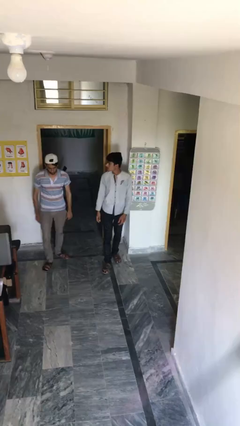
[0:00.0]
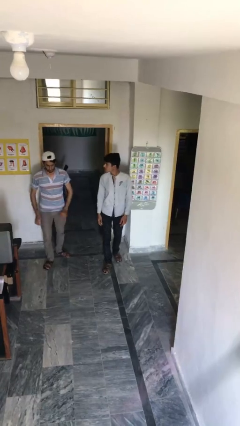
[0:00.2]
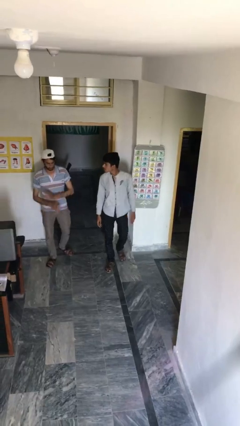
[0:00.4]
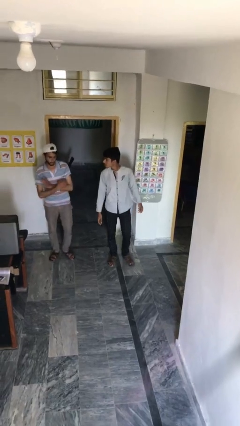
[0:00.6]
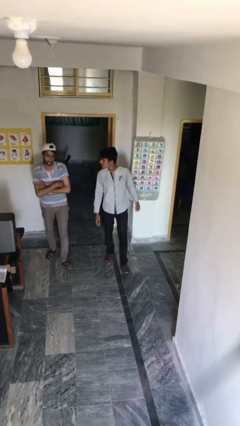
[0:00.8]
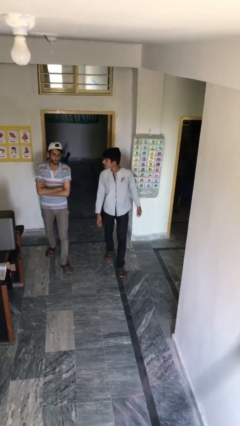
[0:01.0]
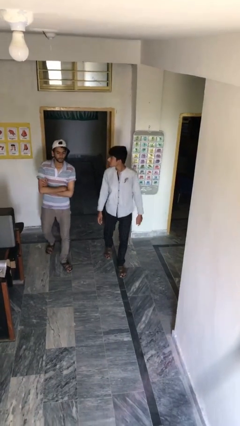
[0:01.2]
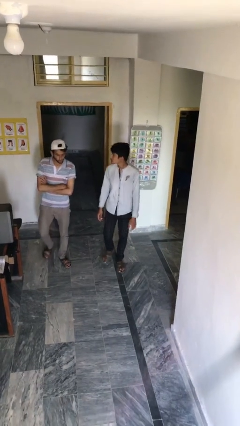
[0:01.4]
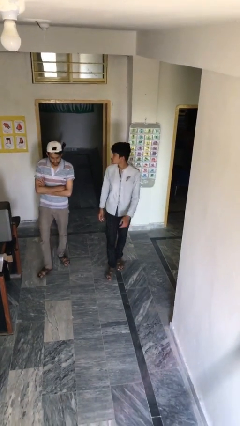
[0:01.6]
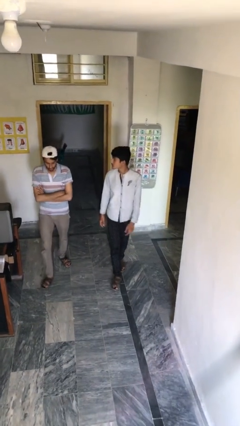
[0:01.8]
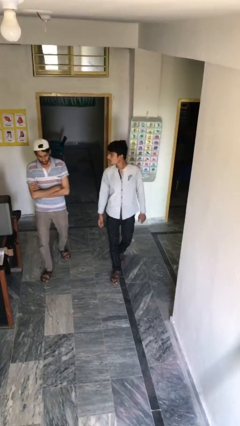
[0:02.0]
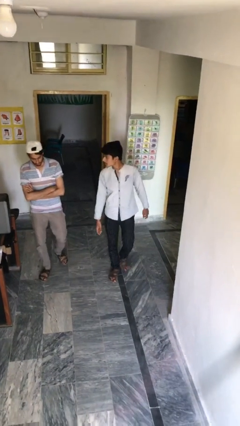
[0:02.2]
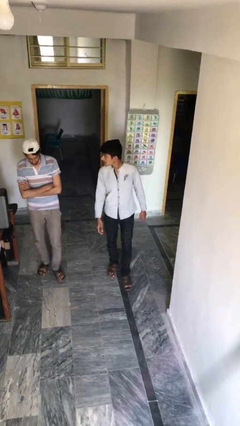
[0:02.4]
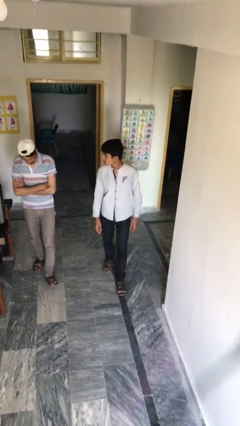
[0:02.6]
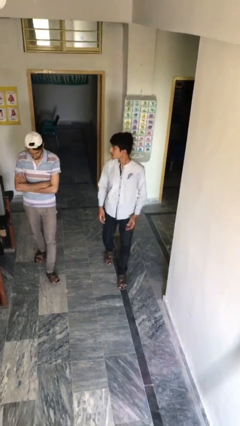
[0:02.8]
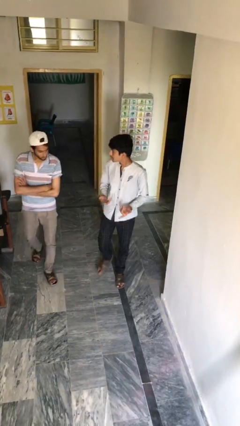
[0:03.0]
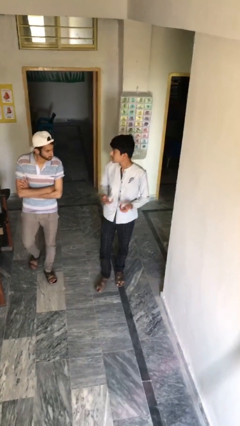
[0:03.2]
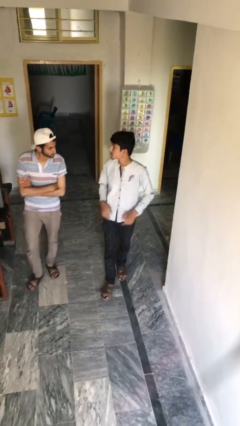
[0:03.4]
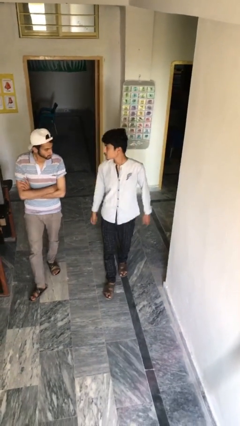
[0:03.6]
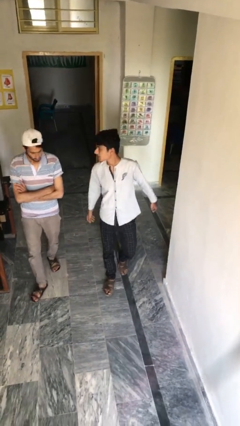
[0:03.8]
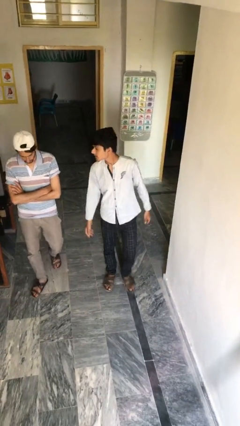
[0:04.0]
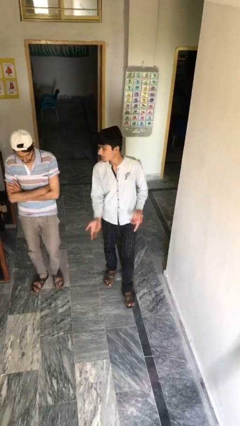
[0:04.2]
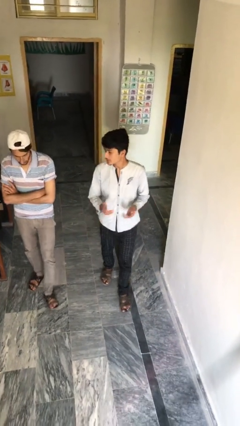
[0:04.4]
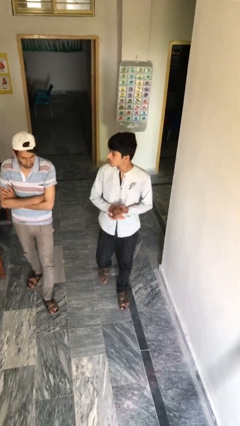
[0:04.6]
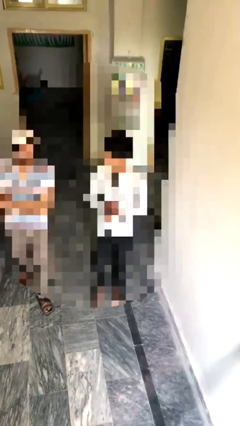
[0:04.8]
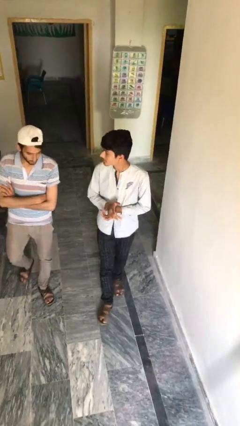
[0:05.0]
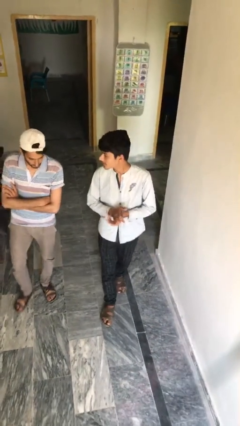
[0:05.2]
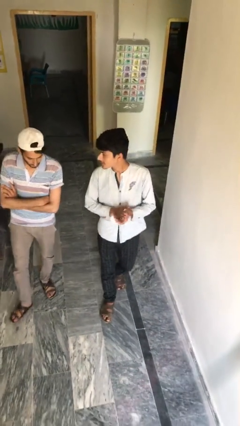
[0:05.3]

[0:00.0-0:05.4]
person talks to person

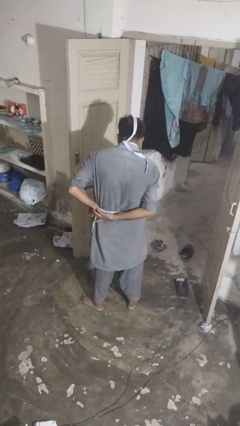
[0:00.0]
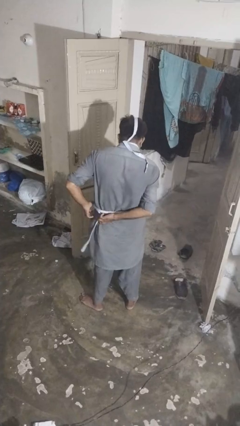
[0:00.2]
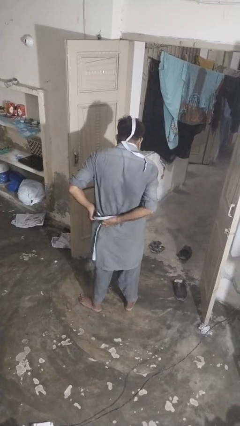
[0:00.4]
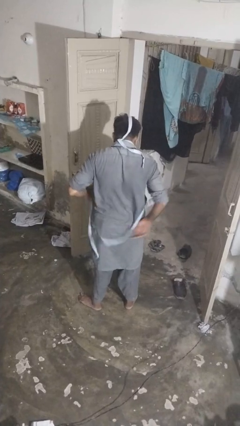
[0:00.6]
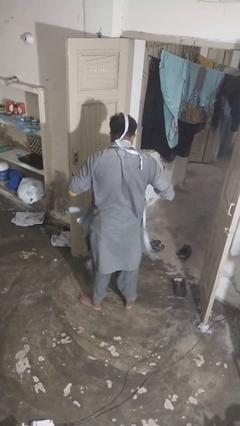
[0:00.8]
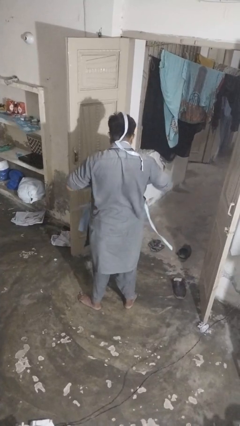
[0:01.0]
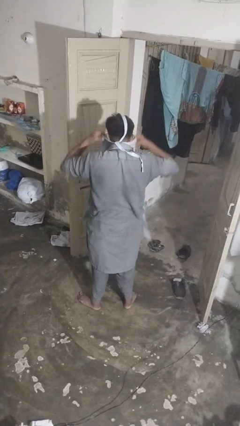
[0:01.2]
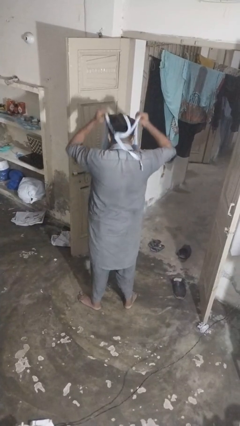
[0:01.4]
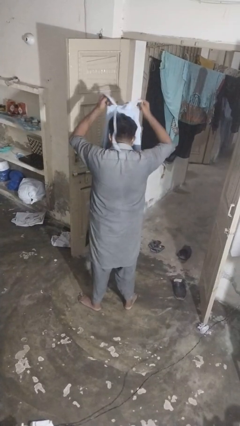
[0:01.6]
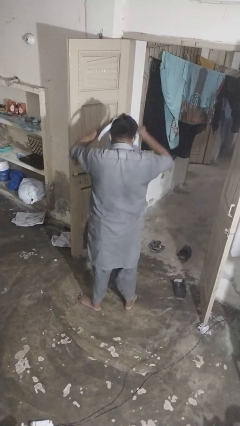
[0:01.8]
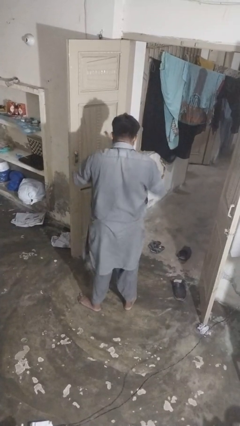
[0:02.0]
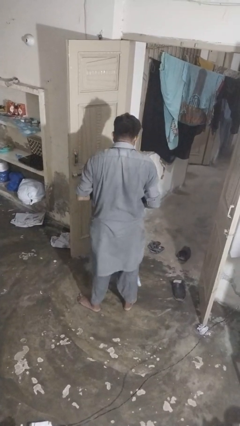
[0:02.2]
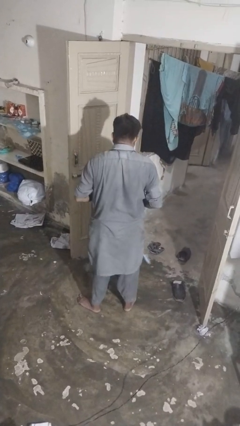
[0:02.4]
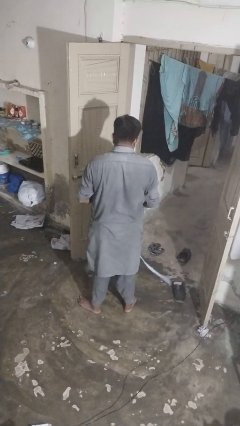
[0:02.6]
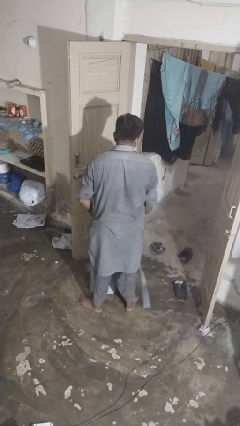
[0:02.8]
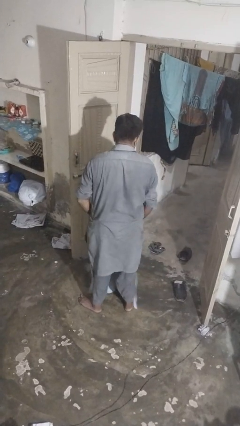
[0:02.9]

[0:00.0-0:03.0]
person takes off apron

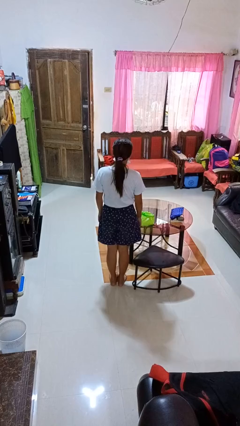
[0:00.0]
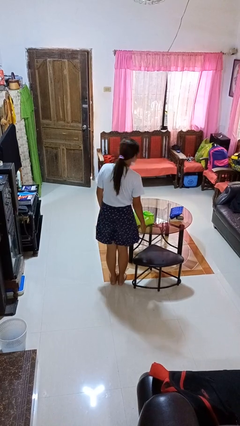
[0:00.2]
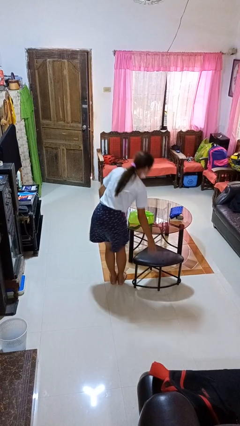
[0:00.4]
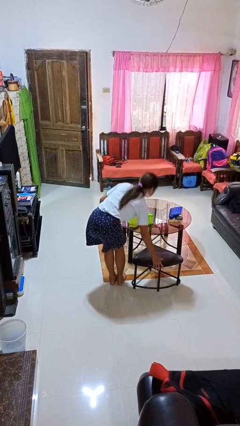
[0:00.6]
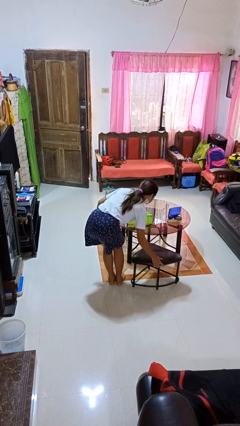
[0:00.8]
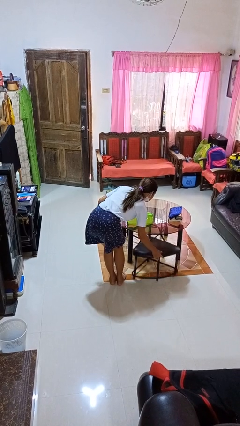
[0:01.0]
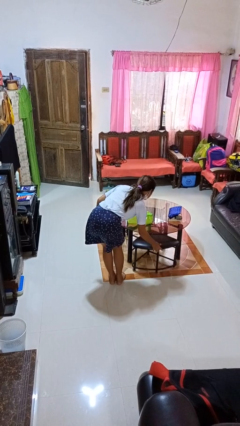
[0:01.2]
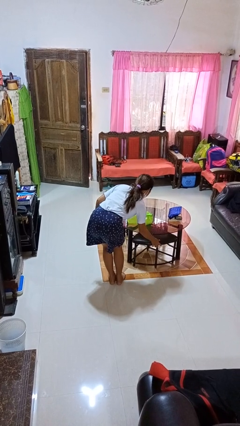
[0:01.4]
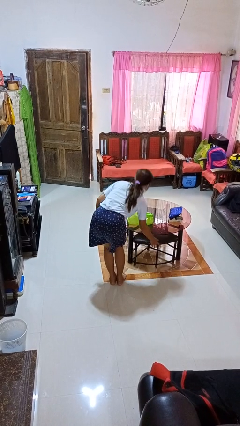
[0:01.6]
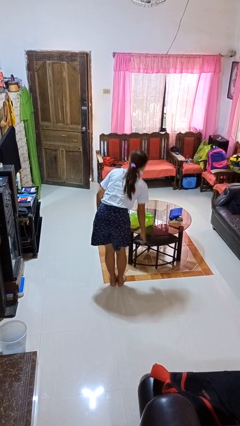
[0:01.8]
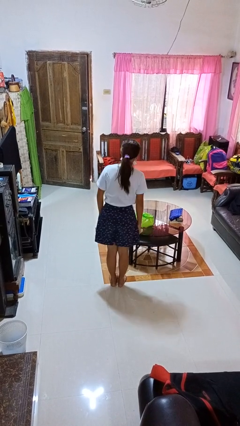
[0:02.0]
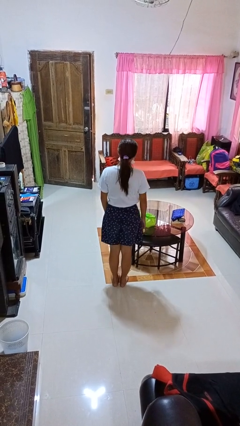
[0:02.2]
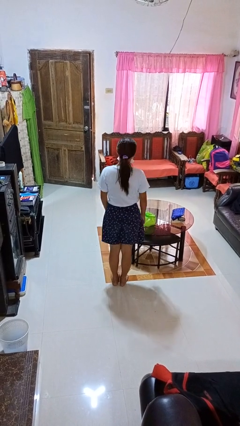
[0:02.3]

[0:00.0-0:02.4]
person pushes in chair

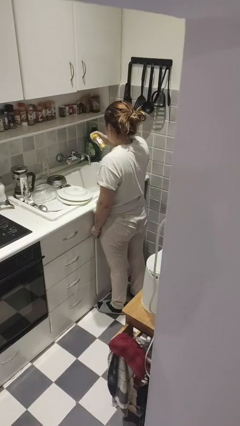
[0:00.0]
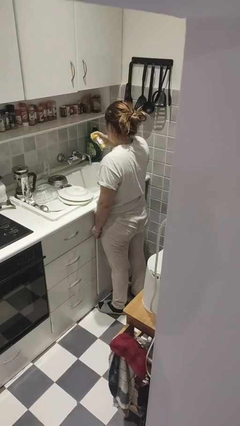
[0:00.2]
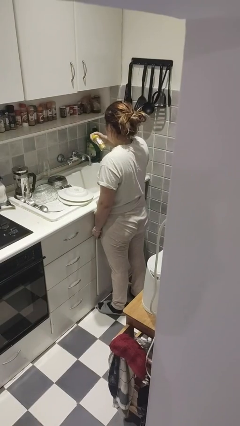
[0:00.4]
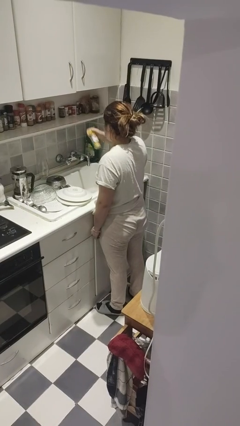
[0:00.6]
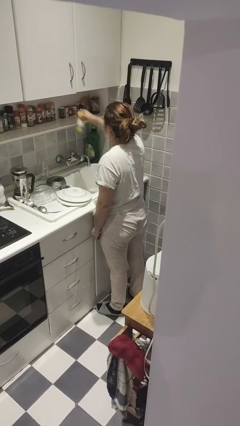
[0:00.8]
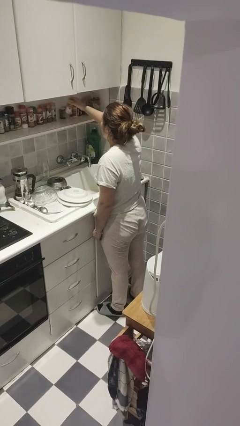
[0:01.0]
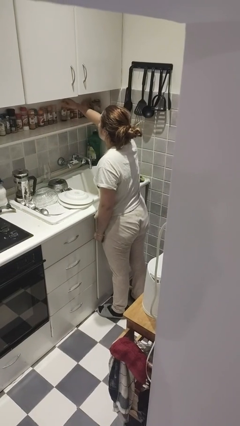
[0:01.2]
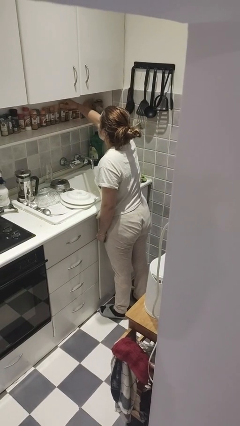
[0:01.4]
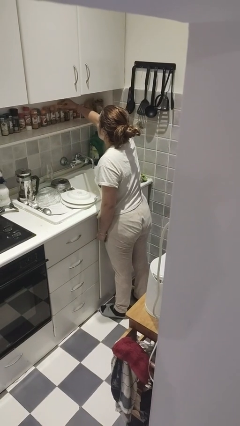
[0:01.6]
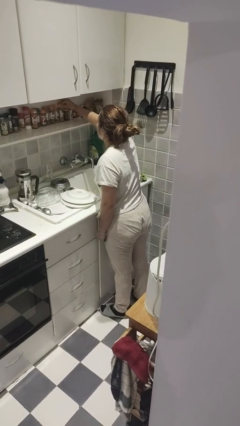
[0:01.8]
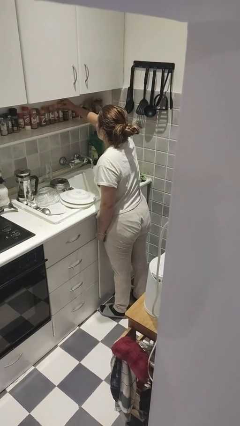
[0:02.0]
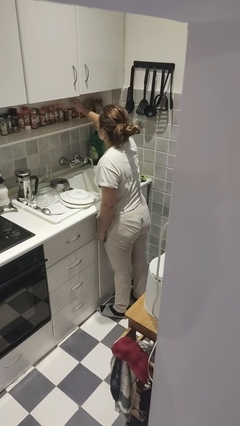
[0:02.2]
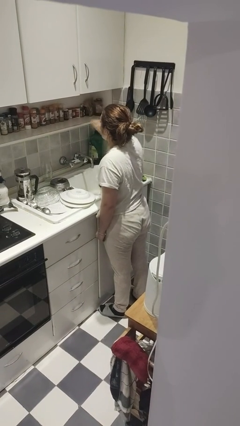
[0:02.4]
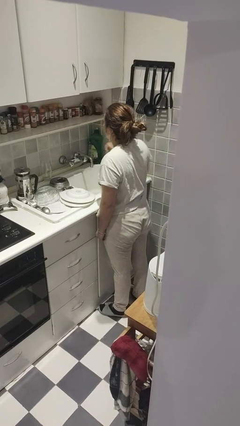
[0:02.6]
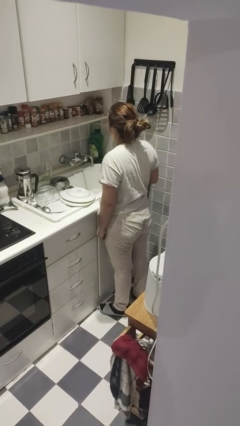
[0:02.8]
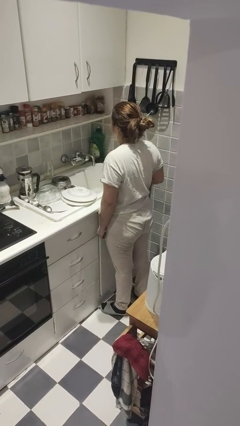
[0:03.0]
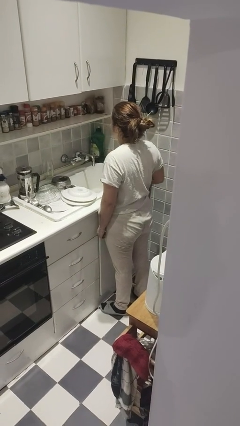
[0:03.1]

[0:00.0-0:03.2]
person puts down object on countertop

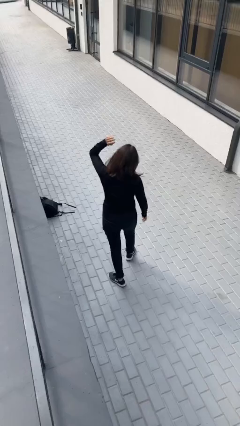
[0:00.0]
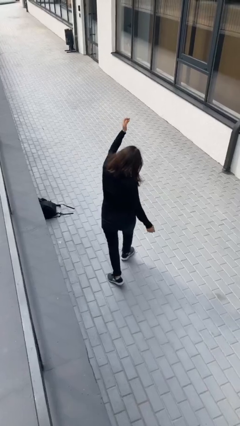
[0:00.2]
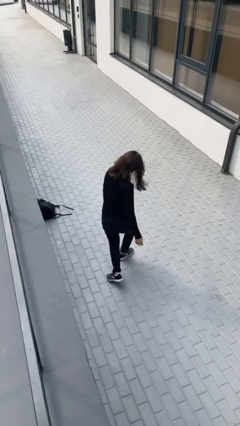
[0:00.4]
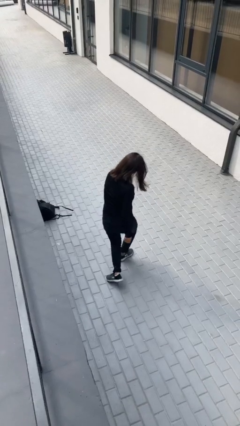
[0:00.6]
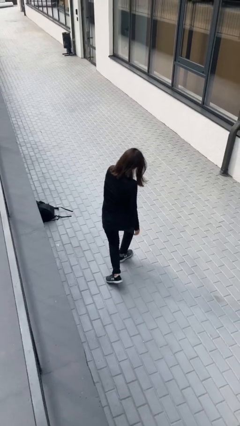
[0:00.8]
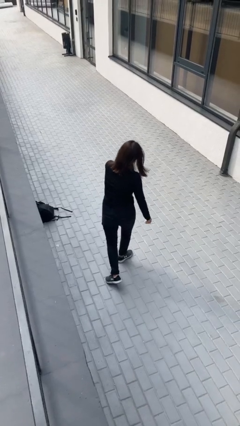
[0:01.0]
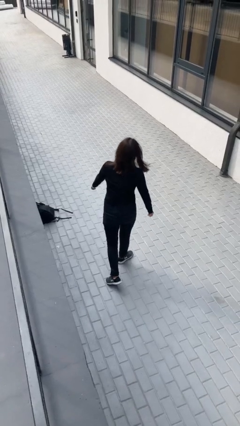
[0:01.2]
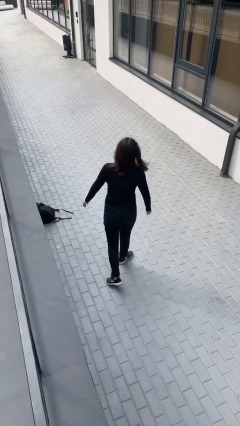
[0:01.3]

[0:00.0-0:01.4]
person karate chop

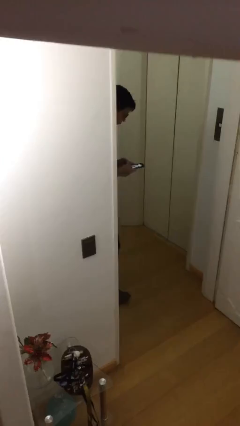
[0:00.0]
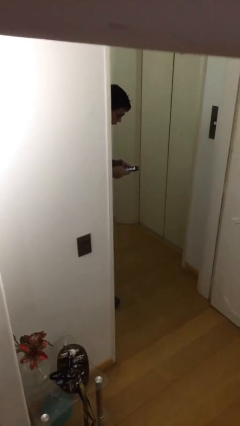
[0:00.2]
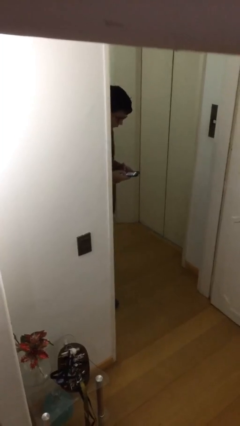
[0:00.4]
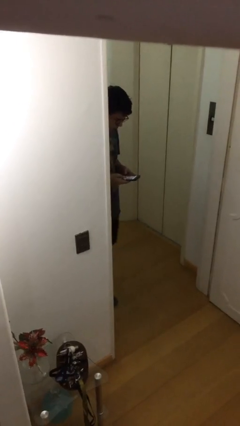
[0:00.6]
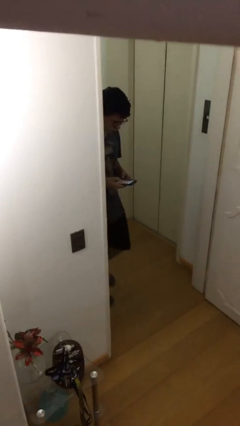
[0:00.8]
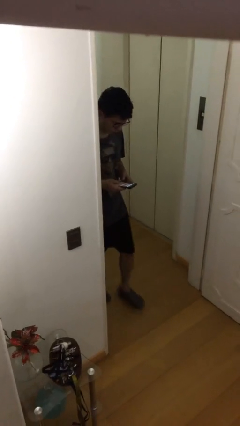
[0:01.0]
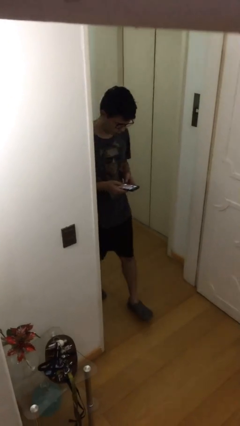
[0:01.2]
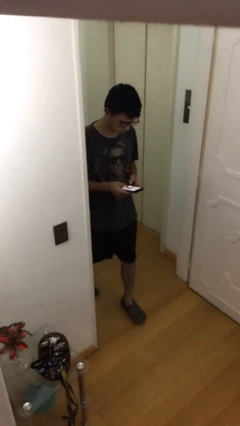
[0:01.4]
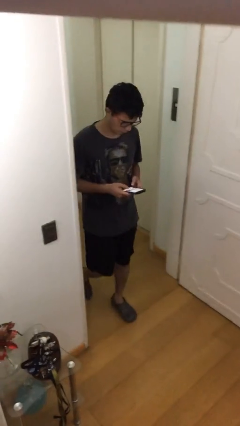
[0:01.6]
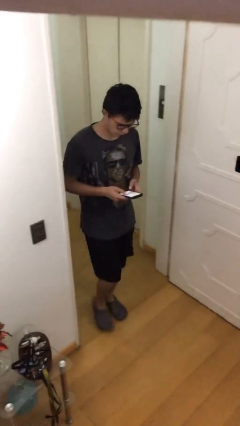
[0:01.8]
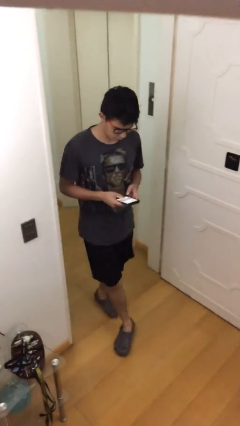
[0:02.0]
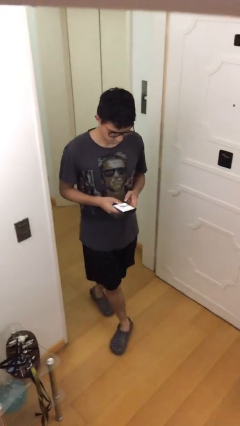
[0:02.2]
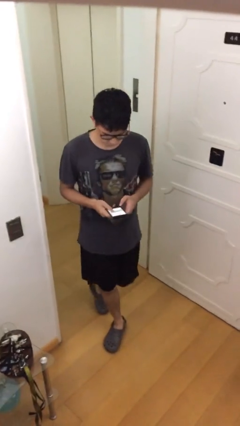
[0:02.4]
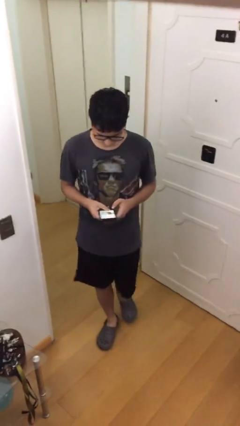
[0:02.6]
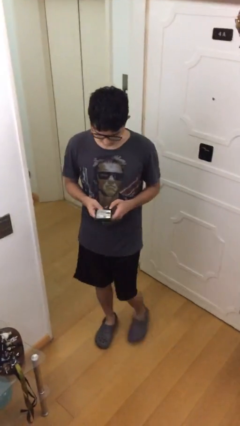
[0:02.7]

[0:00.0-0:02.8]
person enters scene through structure
